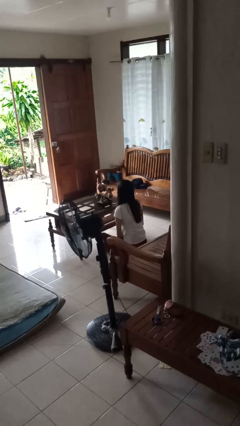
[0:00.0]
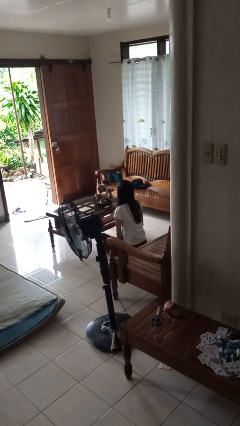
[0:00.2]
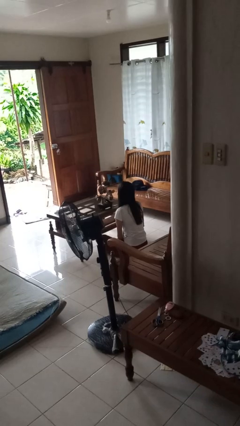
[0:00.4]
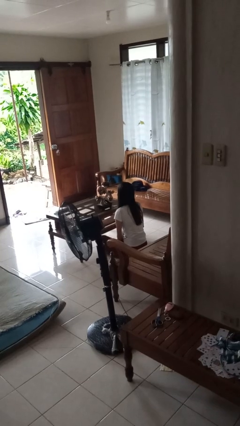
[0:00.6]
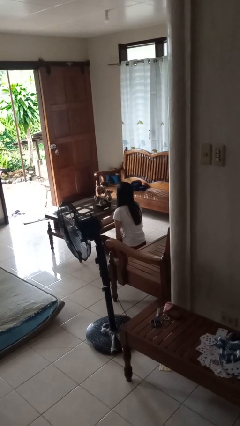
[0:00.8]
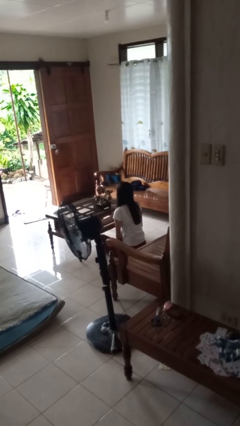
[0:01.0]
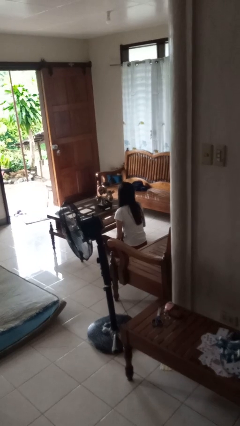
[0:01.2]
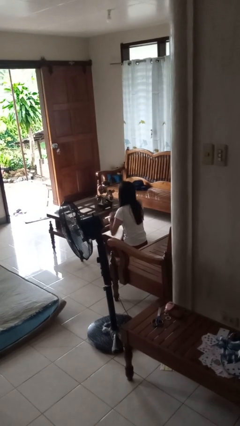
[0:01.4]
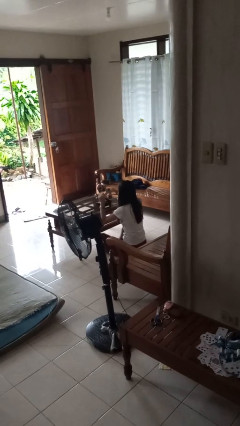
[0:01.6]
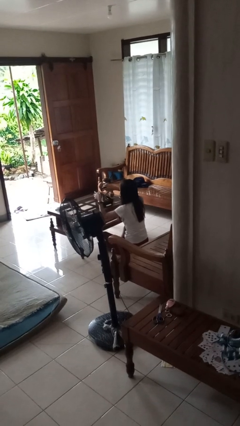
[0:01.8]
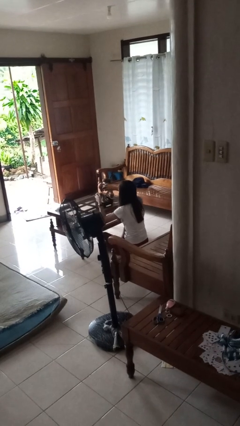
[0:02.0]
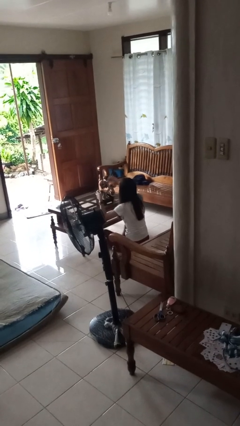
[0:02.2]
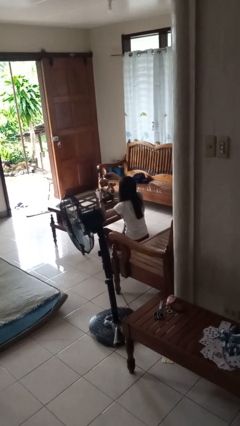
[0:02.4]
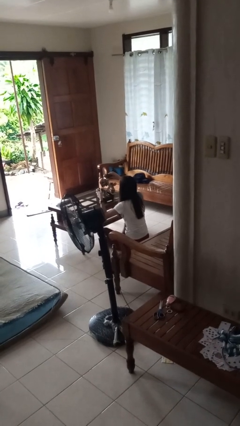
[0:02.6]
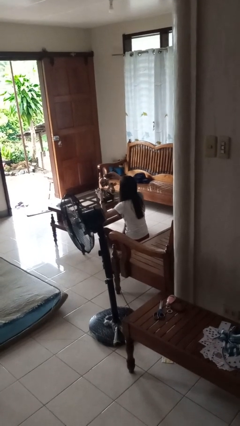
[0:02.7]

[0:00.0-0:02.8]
person arranges flowers in vase

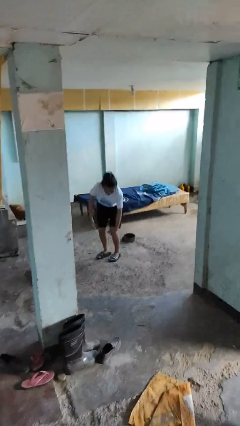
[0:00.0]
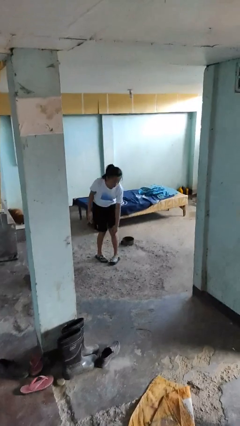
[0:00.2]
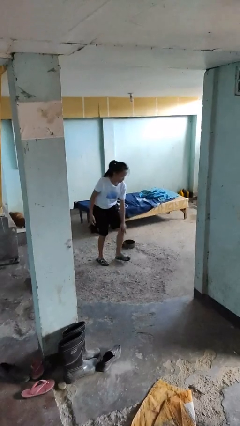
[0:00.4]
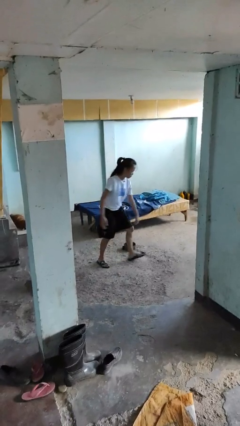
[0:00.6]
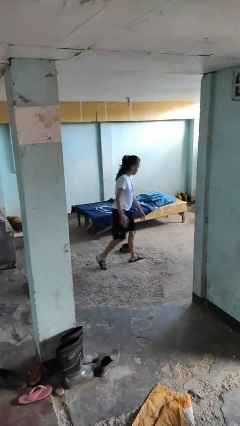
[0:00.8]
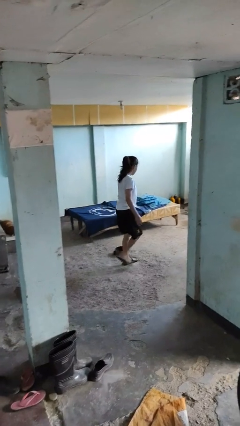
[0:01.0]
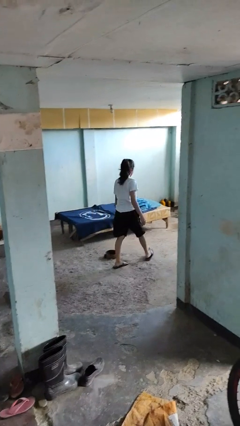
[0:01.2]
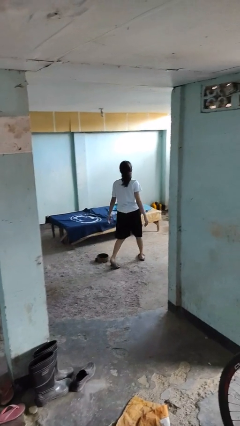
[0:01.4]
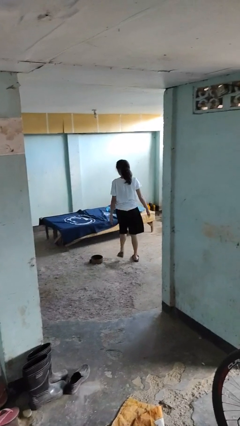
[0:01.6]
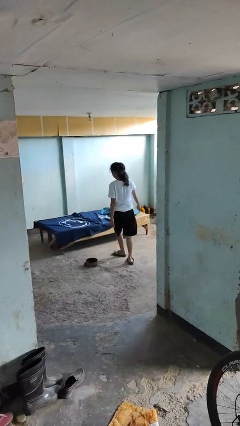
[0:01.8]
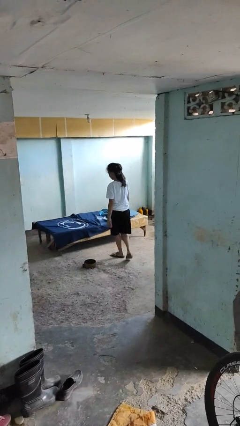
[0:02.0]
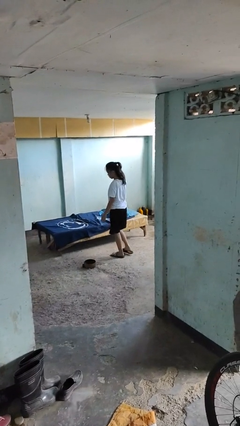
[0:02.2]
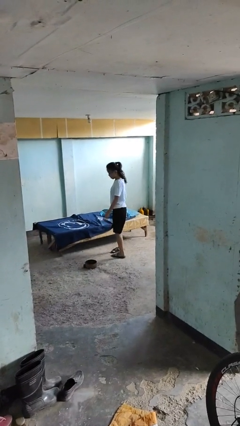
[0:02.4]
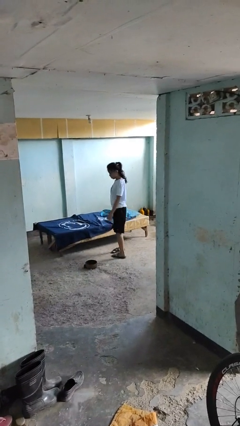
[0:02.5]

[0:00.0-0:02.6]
person stands up from floor

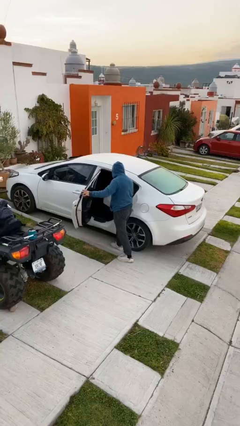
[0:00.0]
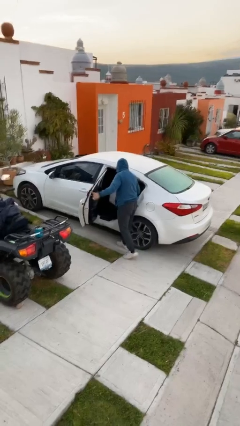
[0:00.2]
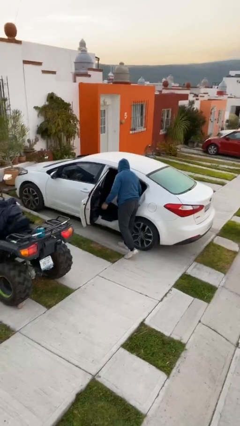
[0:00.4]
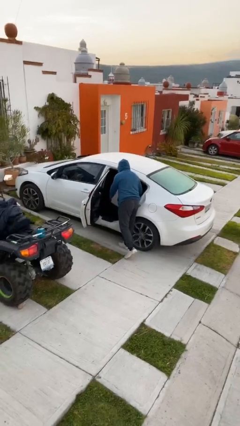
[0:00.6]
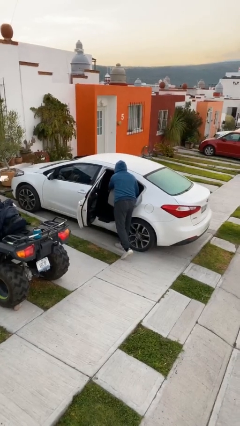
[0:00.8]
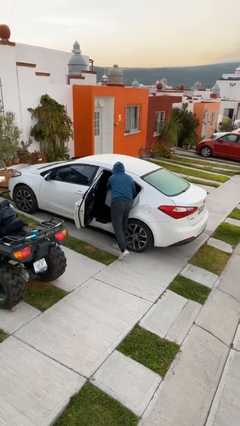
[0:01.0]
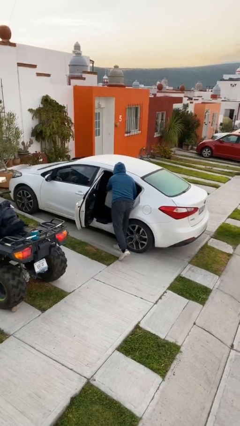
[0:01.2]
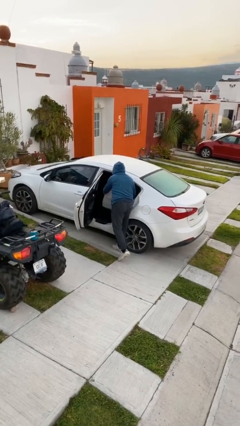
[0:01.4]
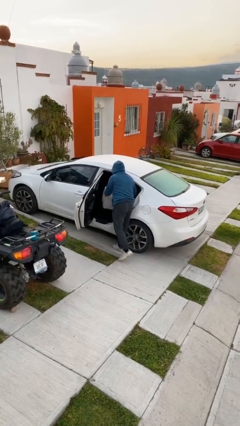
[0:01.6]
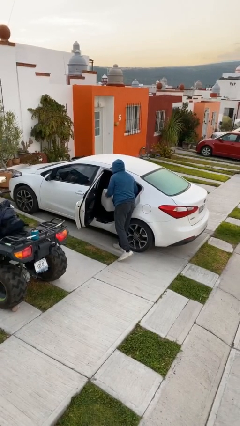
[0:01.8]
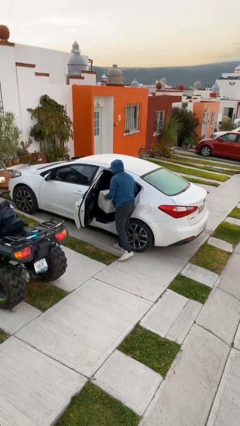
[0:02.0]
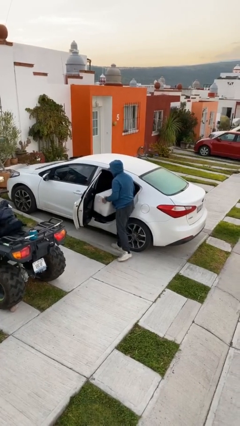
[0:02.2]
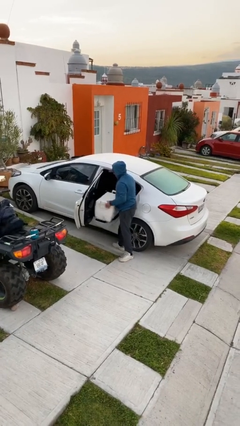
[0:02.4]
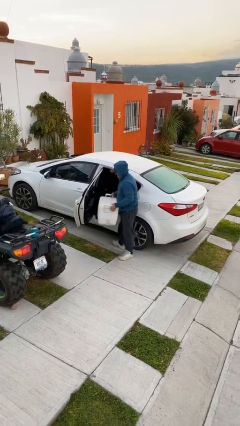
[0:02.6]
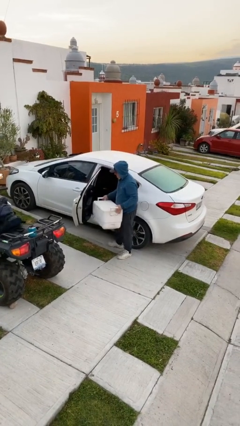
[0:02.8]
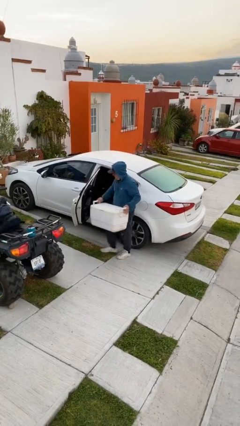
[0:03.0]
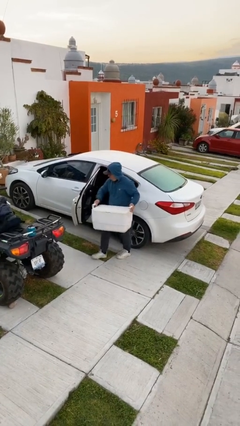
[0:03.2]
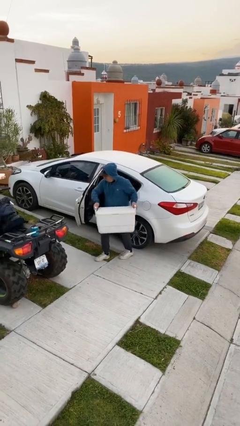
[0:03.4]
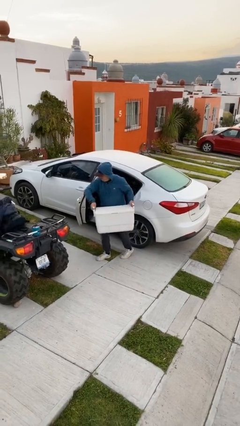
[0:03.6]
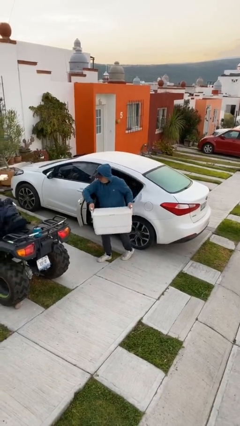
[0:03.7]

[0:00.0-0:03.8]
person unloads car

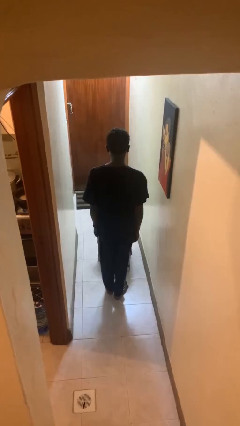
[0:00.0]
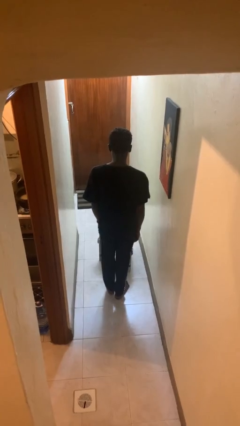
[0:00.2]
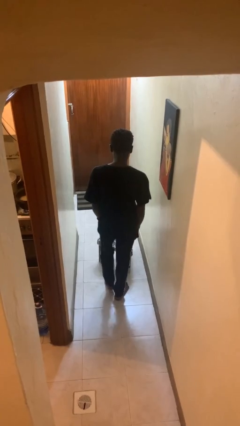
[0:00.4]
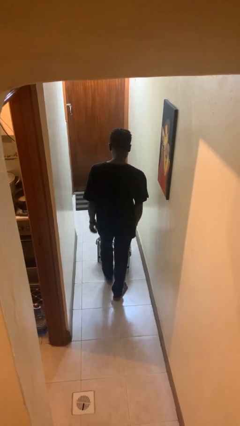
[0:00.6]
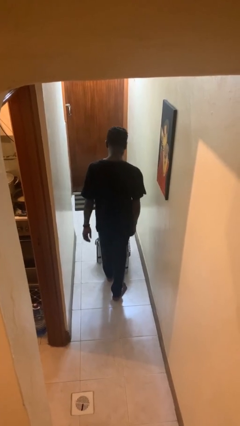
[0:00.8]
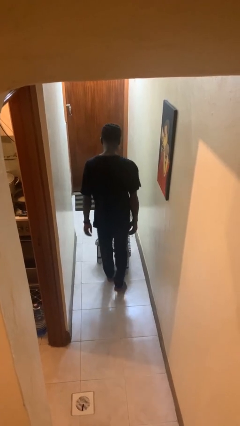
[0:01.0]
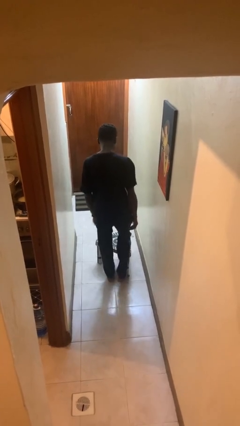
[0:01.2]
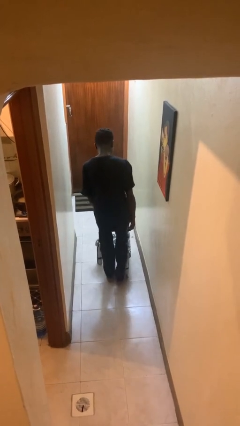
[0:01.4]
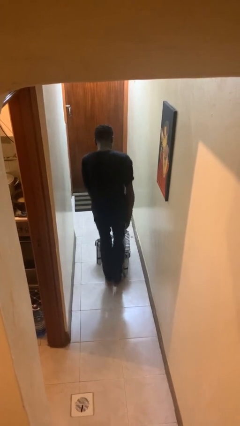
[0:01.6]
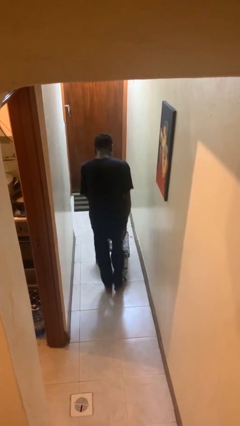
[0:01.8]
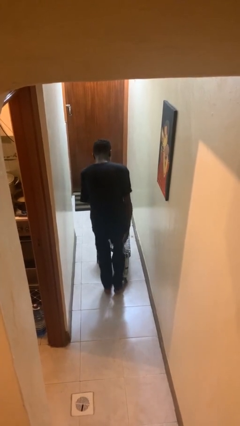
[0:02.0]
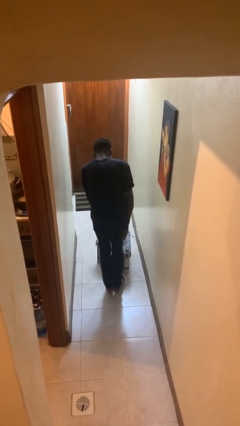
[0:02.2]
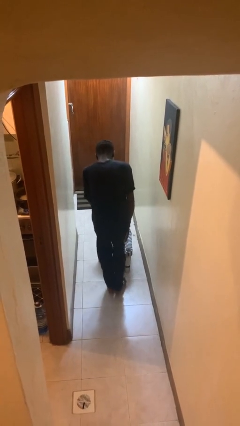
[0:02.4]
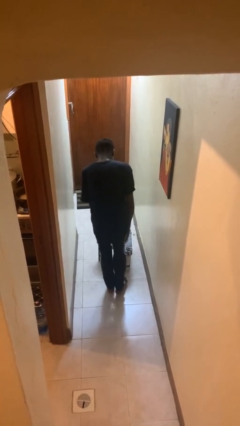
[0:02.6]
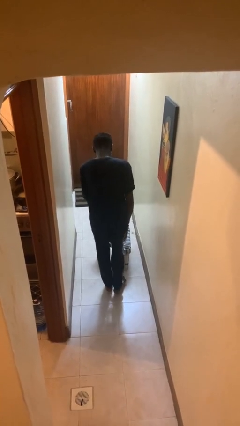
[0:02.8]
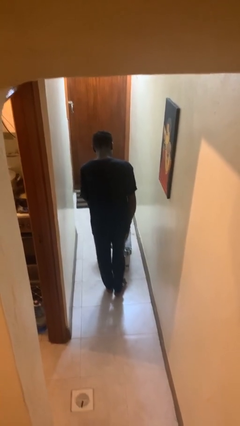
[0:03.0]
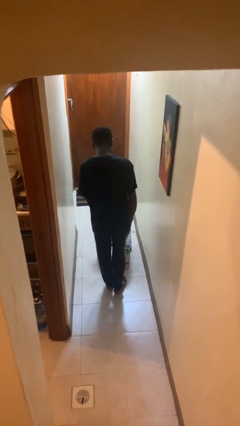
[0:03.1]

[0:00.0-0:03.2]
person stubs toe

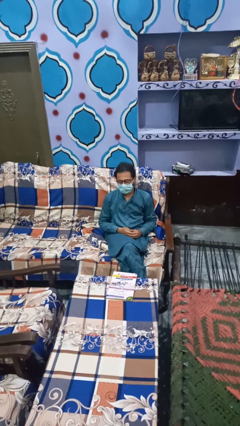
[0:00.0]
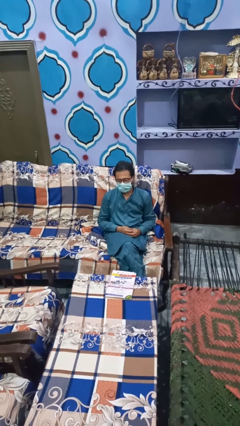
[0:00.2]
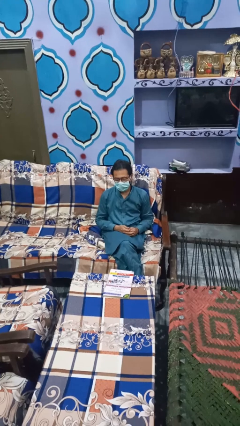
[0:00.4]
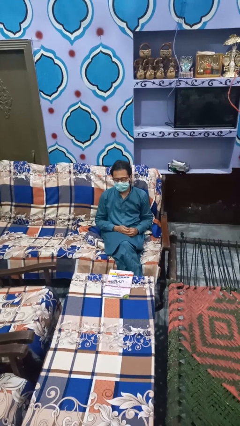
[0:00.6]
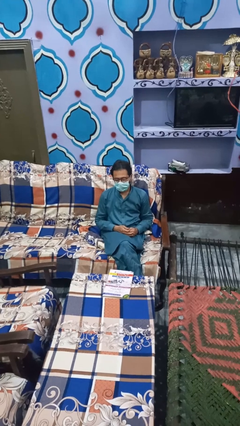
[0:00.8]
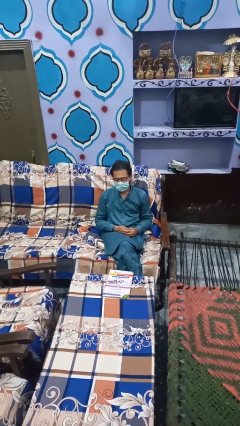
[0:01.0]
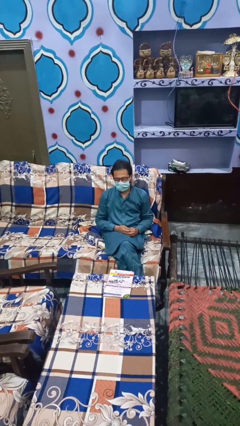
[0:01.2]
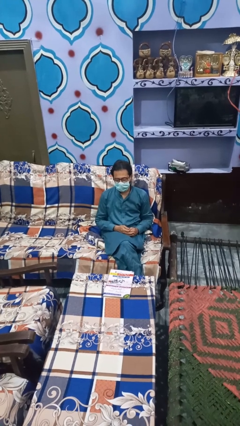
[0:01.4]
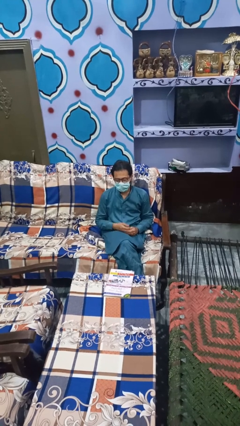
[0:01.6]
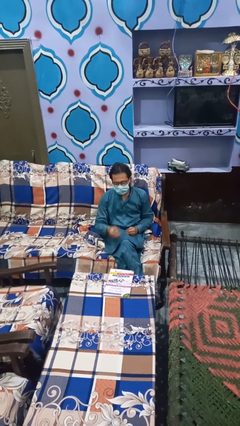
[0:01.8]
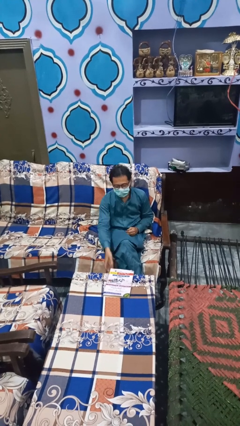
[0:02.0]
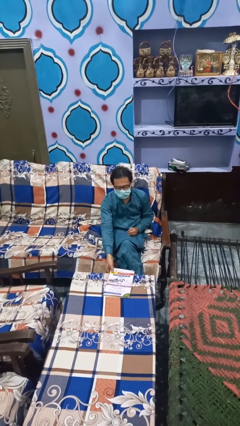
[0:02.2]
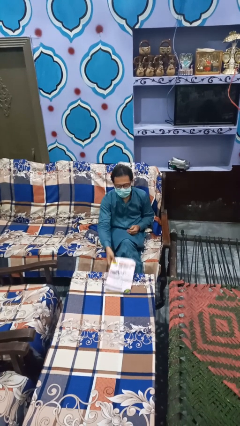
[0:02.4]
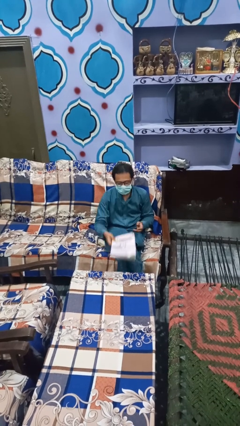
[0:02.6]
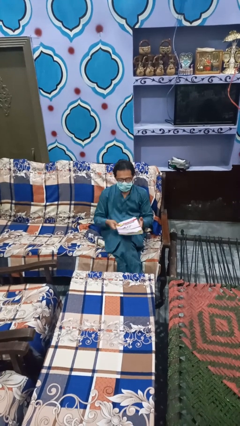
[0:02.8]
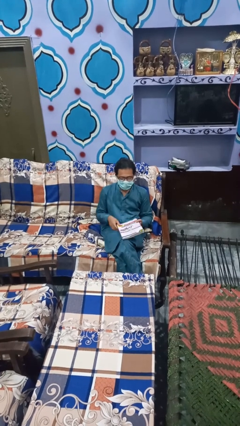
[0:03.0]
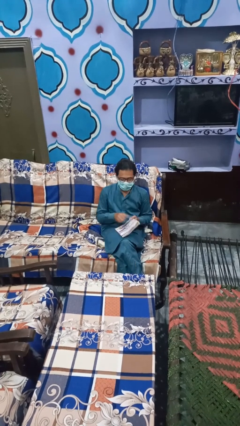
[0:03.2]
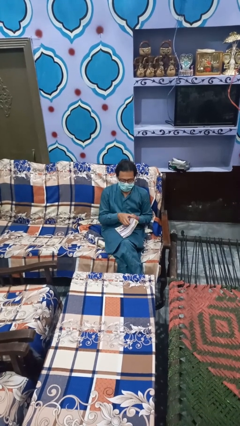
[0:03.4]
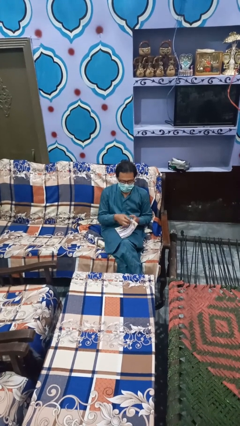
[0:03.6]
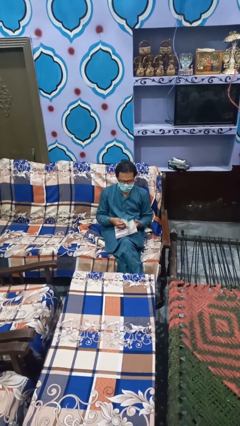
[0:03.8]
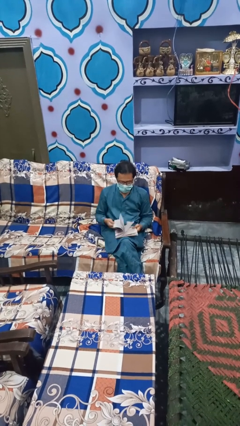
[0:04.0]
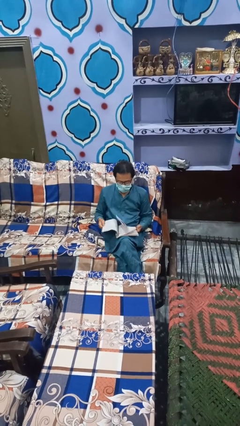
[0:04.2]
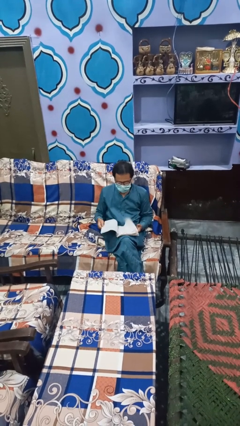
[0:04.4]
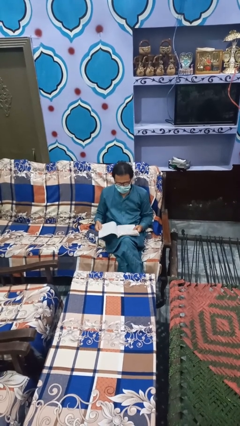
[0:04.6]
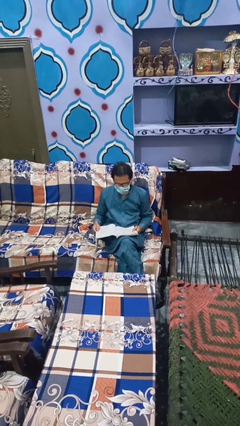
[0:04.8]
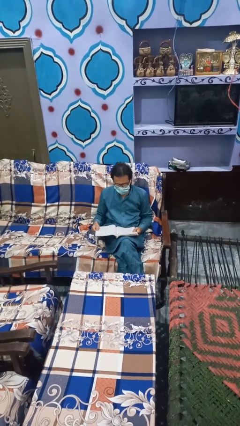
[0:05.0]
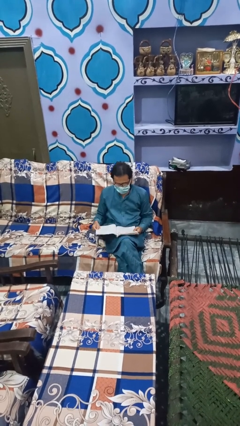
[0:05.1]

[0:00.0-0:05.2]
person reads book
